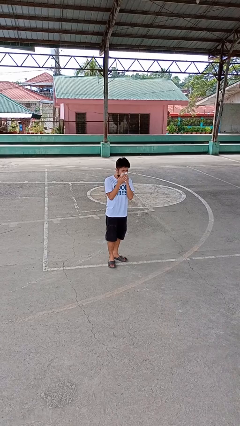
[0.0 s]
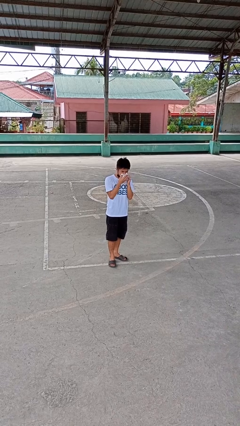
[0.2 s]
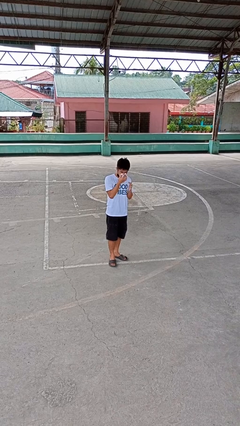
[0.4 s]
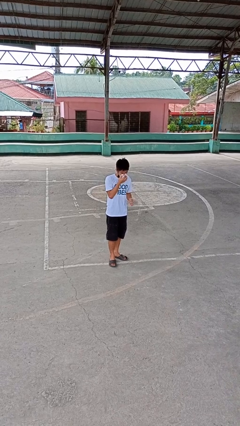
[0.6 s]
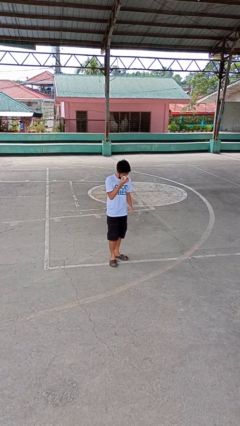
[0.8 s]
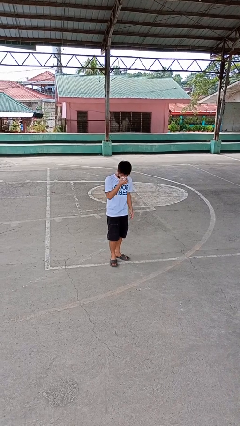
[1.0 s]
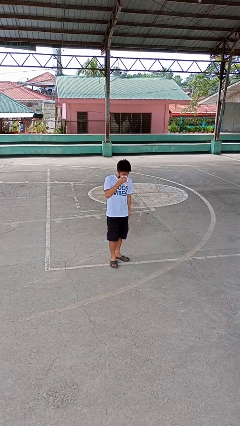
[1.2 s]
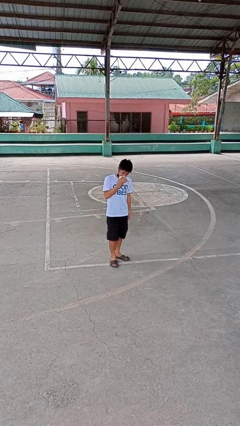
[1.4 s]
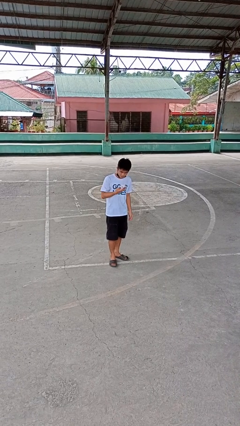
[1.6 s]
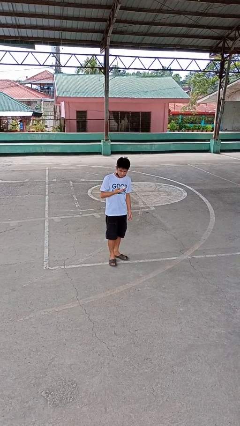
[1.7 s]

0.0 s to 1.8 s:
person blows nose

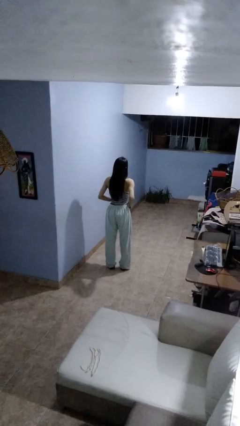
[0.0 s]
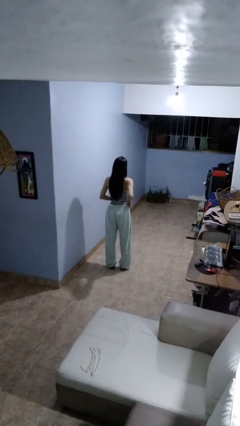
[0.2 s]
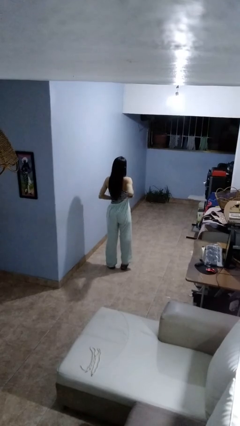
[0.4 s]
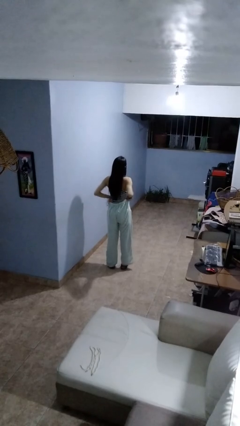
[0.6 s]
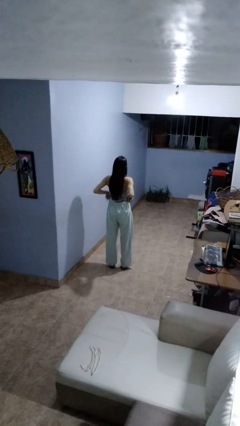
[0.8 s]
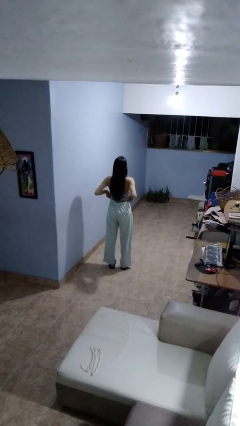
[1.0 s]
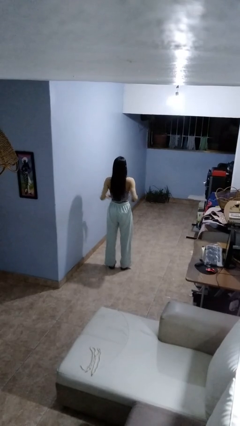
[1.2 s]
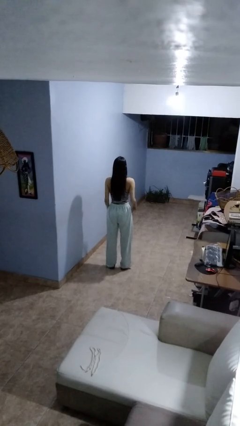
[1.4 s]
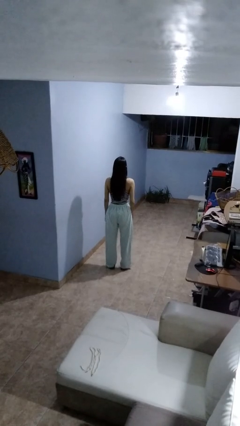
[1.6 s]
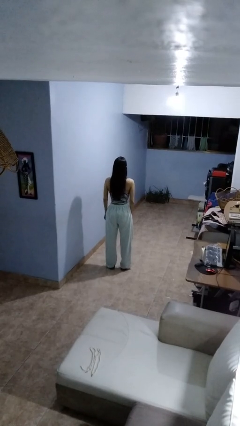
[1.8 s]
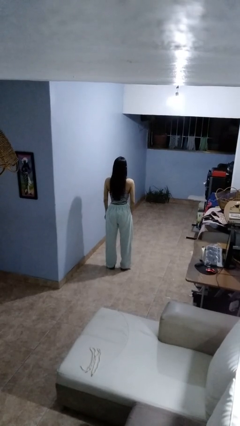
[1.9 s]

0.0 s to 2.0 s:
person hikes up pants

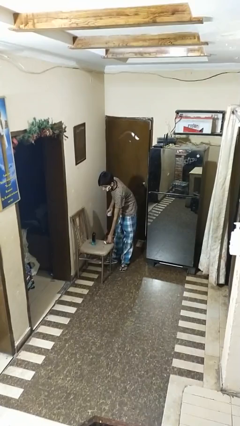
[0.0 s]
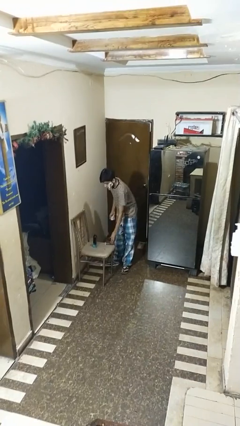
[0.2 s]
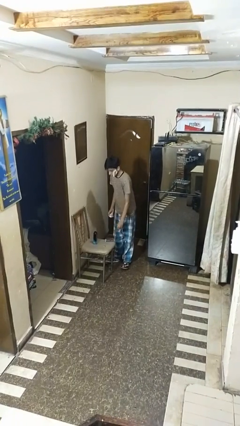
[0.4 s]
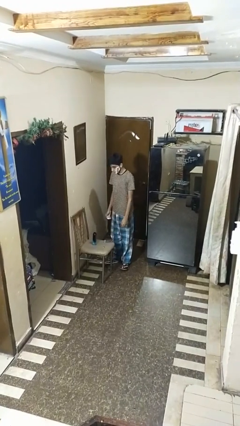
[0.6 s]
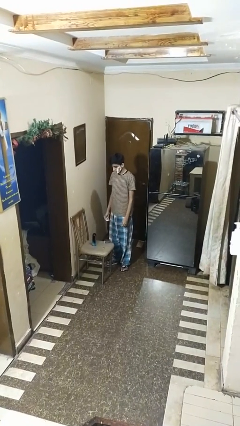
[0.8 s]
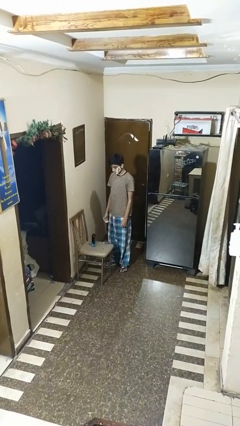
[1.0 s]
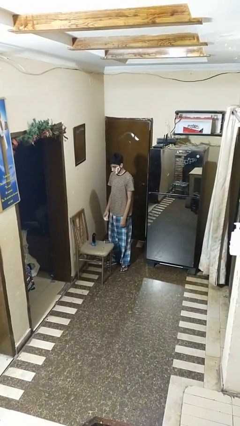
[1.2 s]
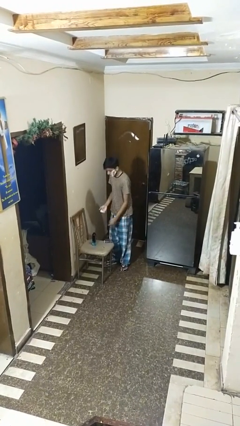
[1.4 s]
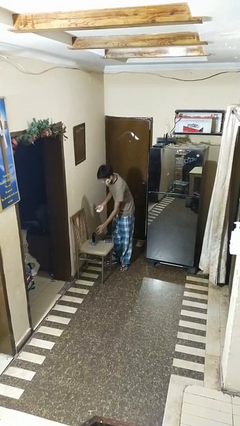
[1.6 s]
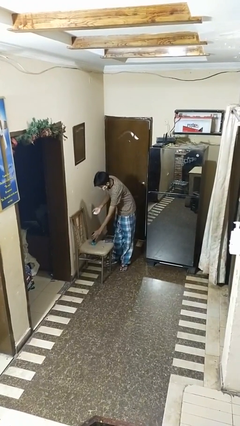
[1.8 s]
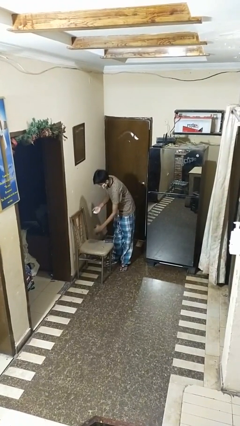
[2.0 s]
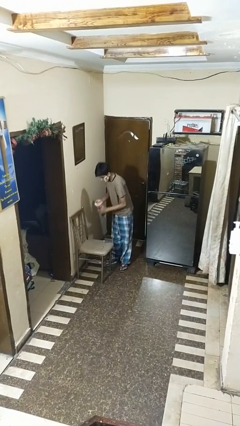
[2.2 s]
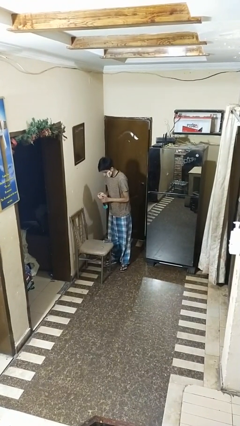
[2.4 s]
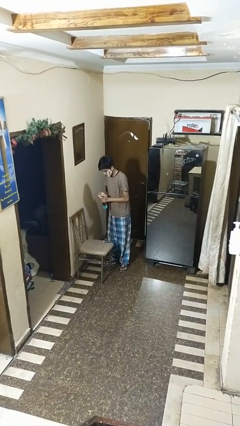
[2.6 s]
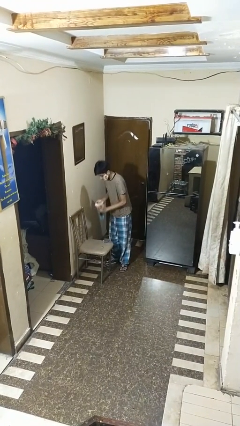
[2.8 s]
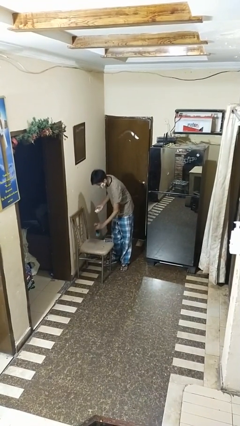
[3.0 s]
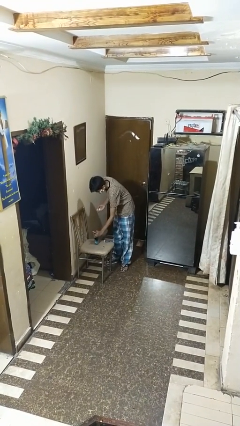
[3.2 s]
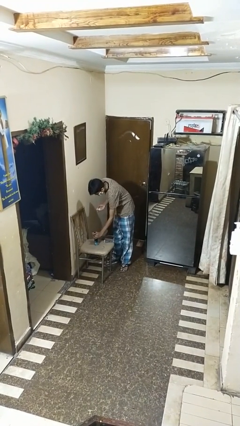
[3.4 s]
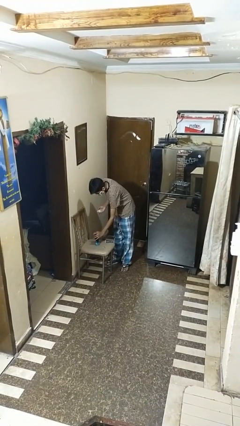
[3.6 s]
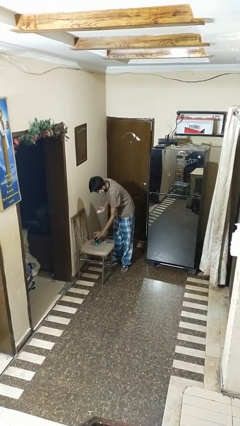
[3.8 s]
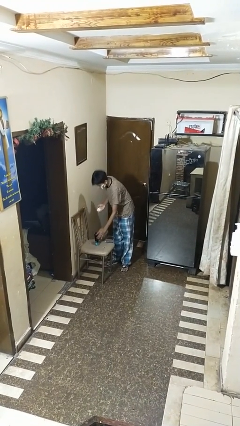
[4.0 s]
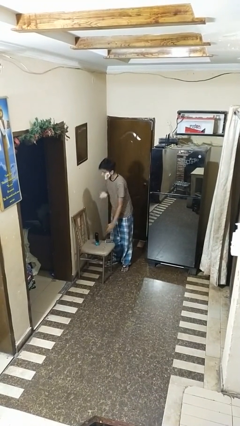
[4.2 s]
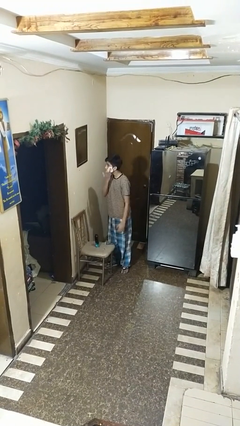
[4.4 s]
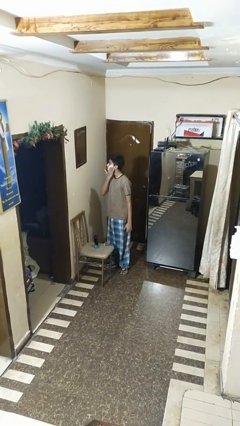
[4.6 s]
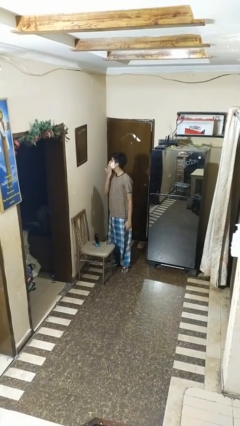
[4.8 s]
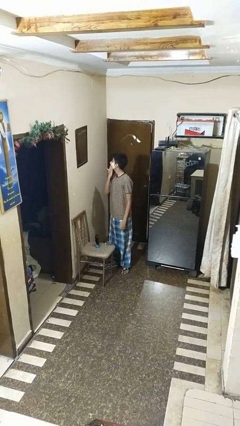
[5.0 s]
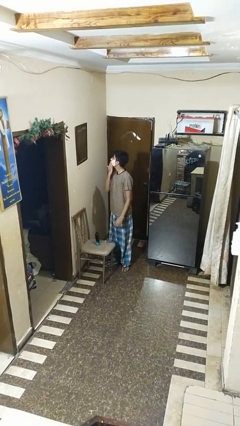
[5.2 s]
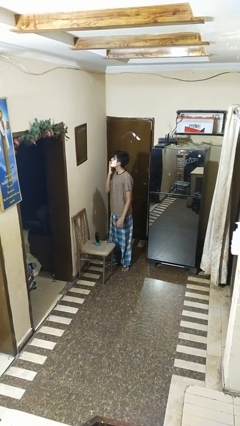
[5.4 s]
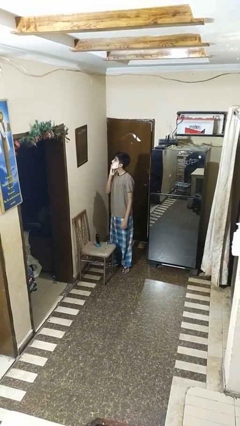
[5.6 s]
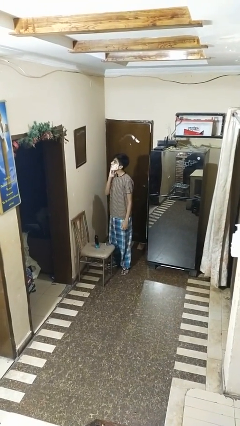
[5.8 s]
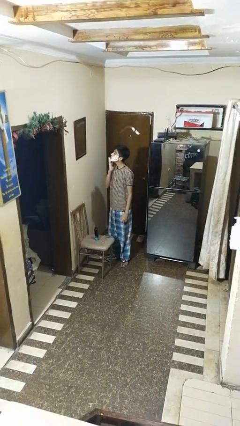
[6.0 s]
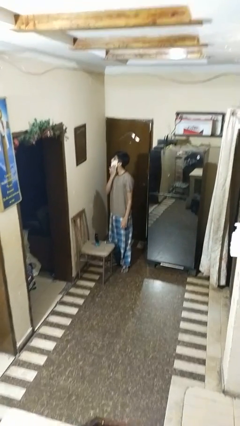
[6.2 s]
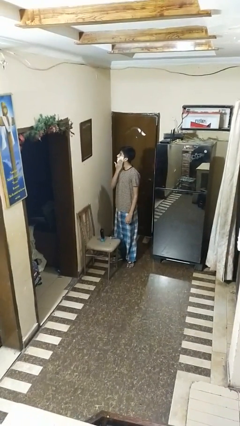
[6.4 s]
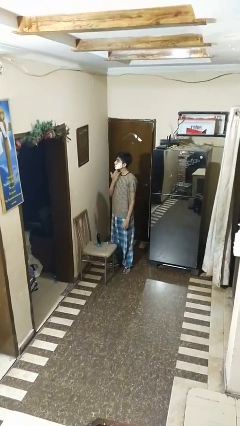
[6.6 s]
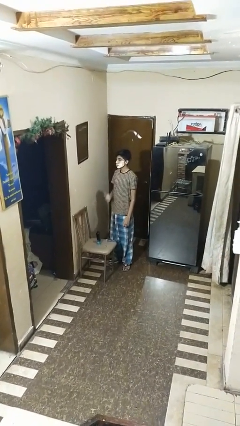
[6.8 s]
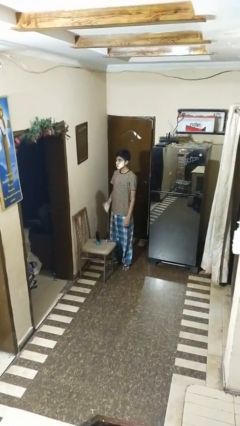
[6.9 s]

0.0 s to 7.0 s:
person applies shaving cream

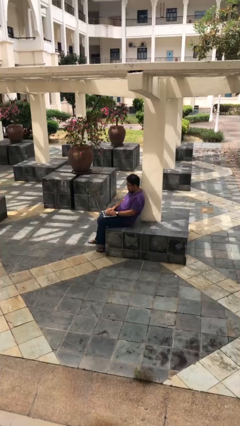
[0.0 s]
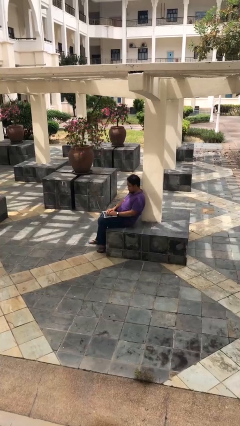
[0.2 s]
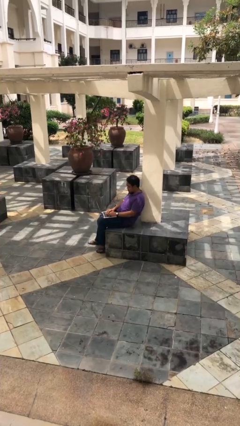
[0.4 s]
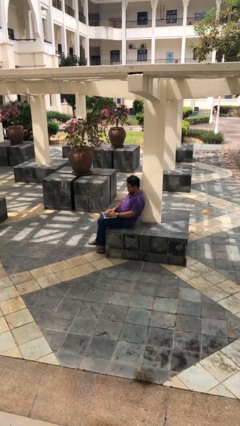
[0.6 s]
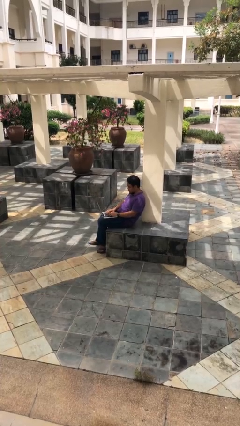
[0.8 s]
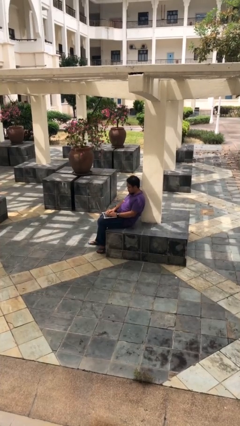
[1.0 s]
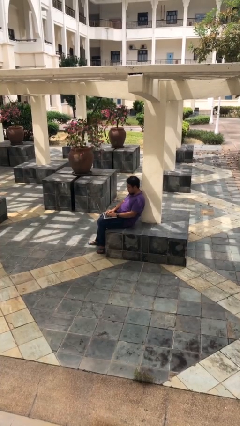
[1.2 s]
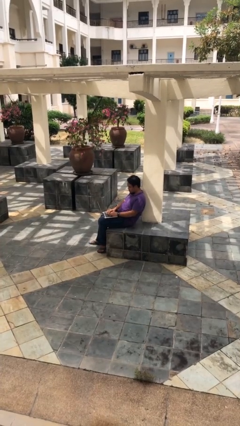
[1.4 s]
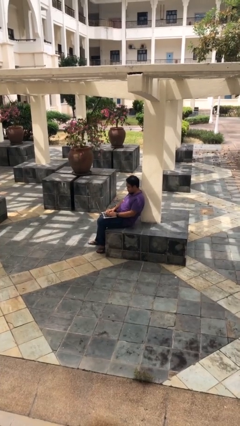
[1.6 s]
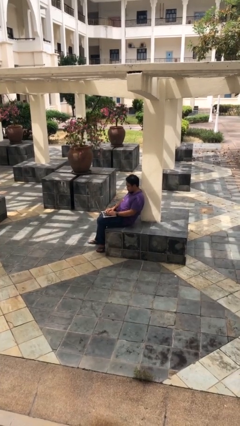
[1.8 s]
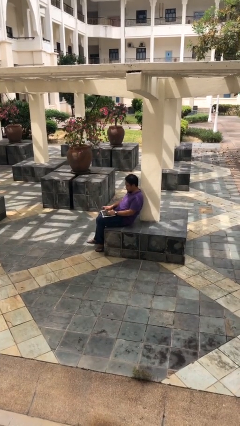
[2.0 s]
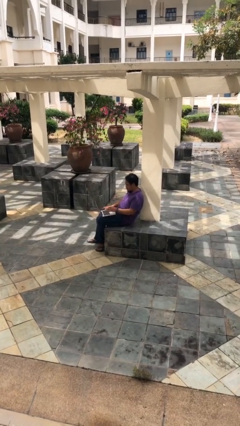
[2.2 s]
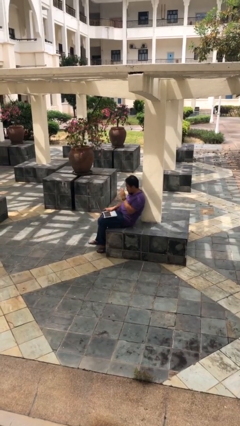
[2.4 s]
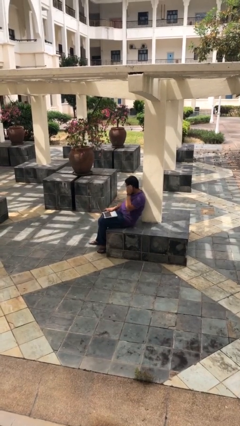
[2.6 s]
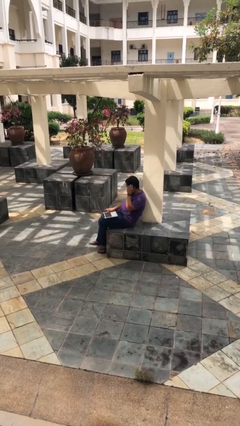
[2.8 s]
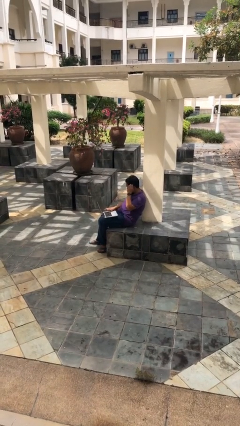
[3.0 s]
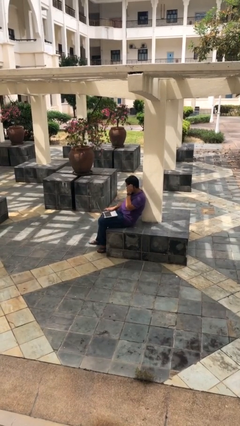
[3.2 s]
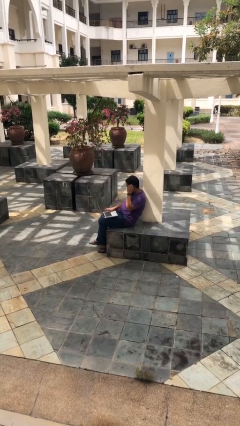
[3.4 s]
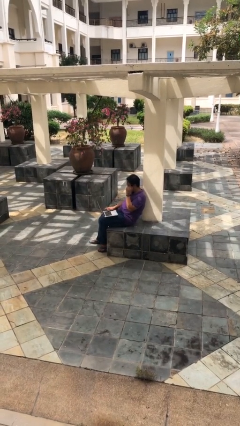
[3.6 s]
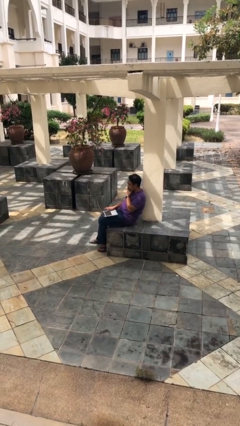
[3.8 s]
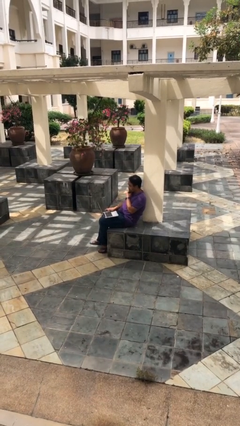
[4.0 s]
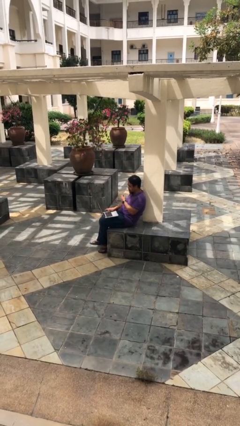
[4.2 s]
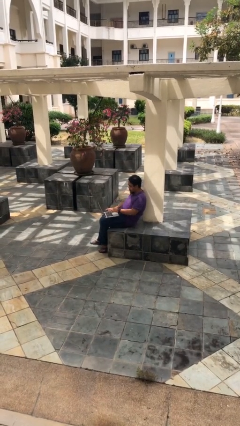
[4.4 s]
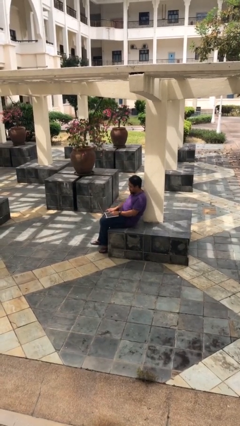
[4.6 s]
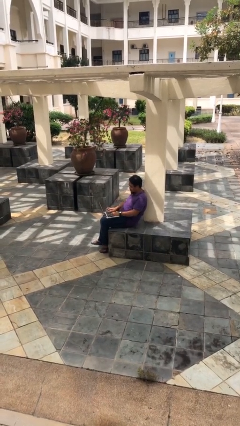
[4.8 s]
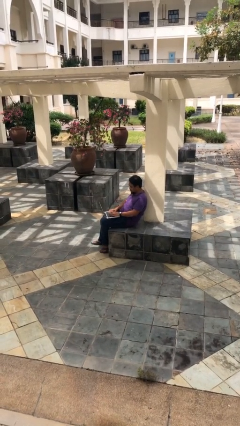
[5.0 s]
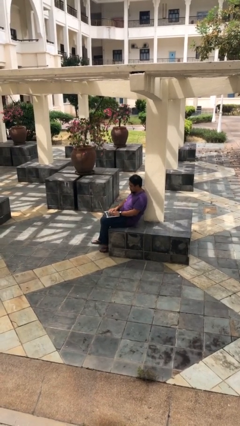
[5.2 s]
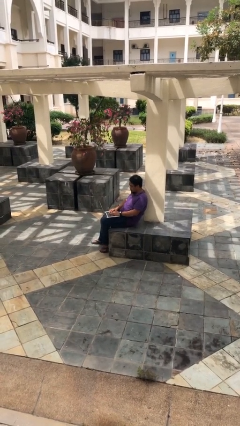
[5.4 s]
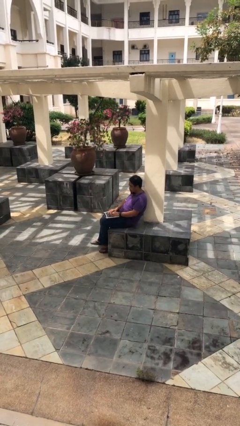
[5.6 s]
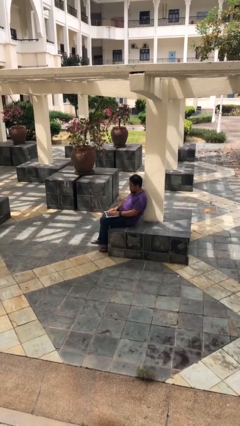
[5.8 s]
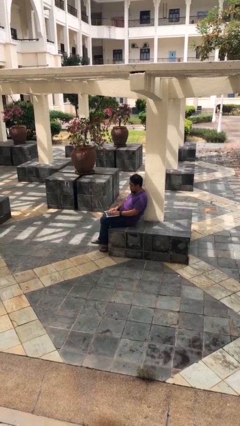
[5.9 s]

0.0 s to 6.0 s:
person interacts with laptop

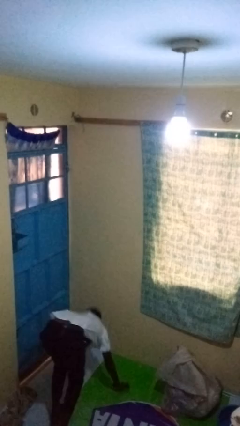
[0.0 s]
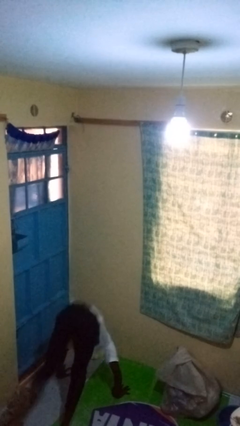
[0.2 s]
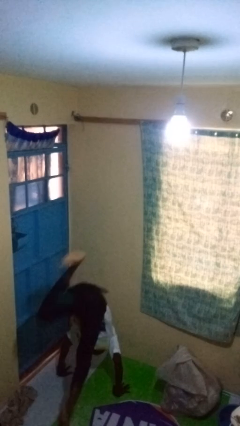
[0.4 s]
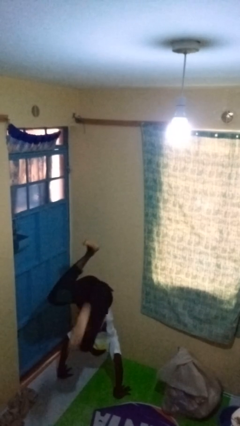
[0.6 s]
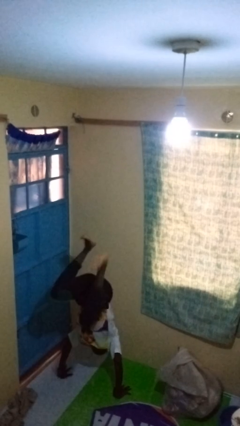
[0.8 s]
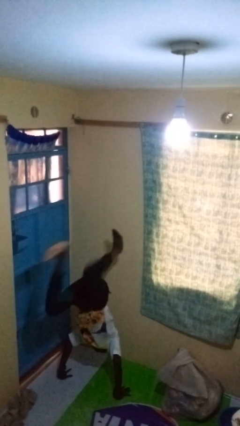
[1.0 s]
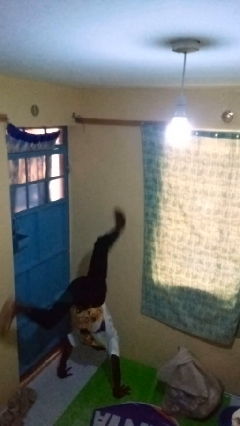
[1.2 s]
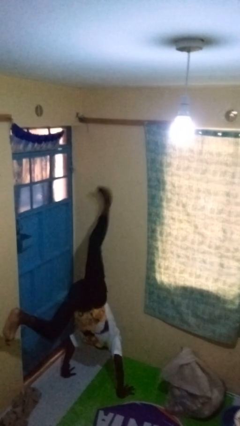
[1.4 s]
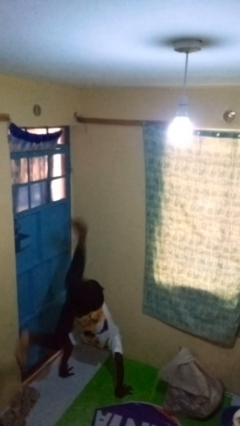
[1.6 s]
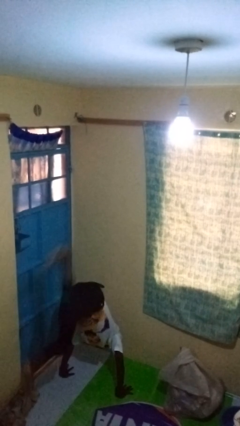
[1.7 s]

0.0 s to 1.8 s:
person handstand
